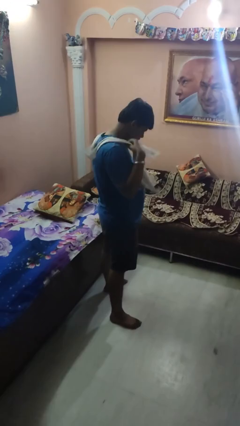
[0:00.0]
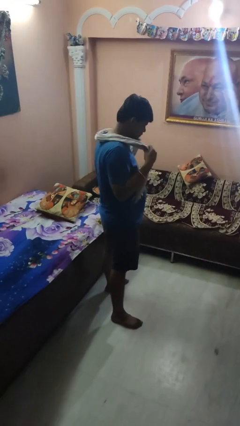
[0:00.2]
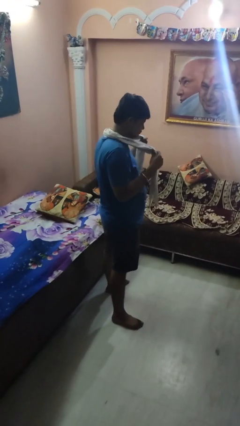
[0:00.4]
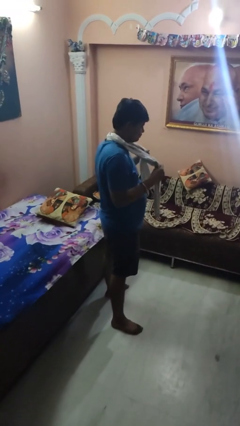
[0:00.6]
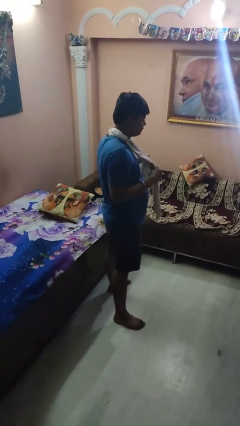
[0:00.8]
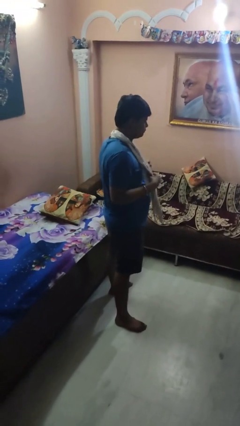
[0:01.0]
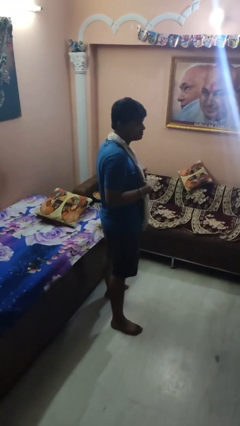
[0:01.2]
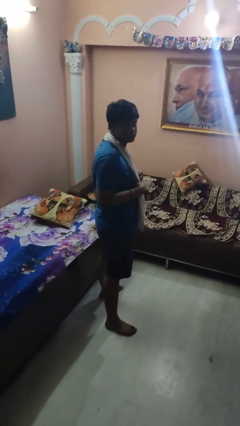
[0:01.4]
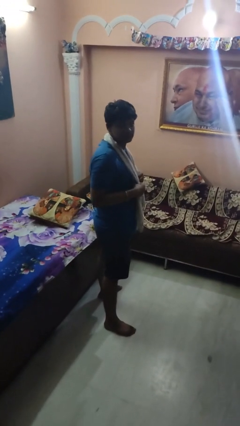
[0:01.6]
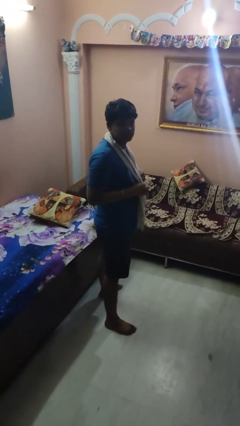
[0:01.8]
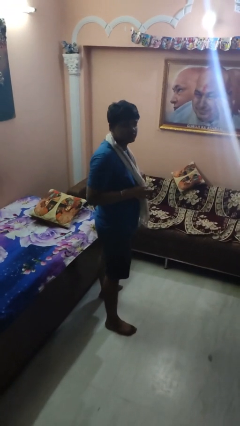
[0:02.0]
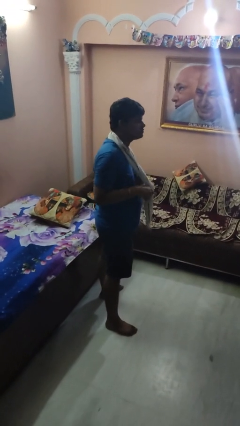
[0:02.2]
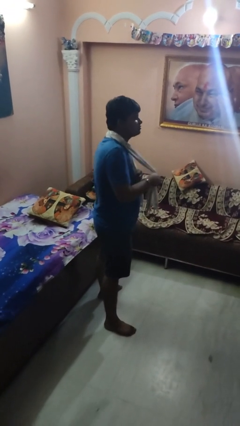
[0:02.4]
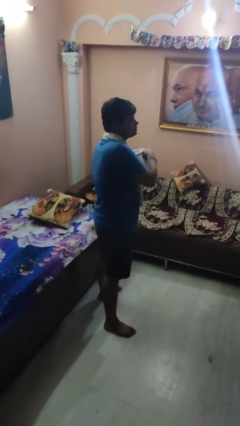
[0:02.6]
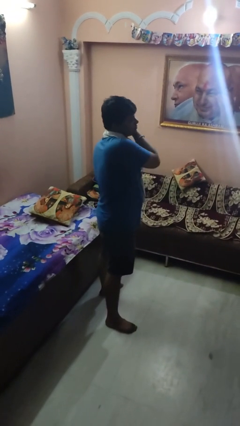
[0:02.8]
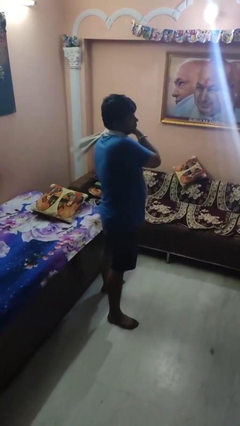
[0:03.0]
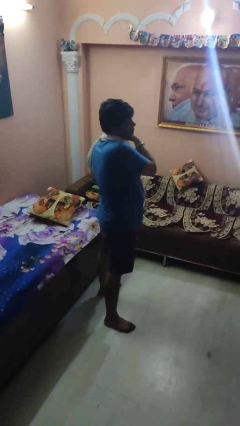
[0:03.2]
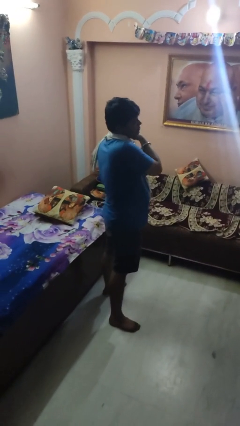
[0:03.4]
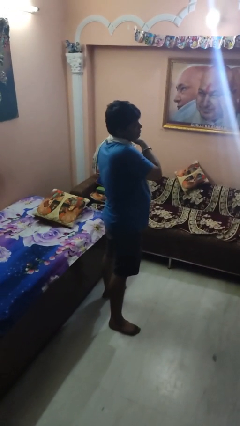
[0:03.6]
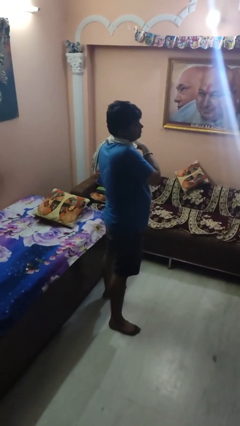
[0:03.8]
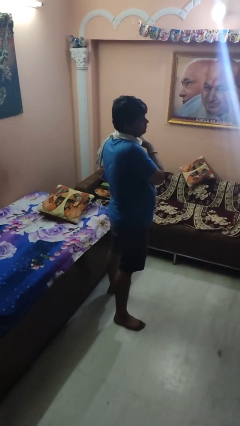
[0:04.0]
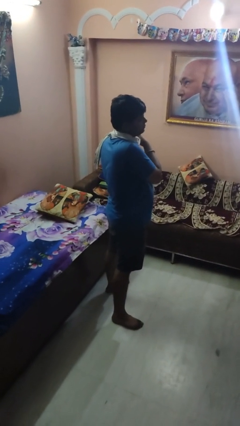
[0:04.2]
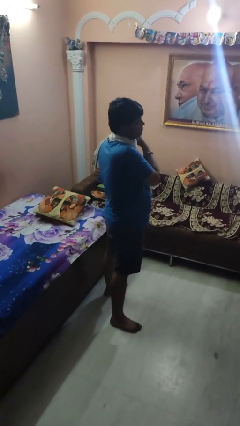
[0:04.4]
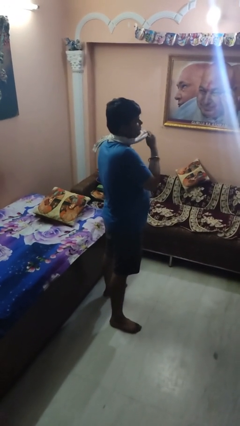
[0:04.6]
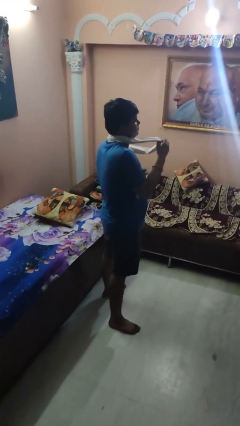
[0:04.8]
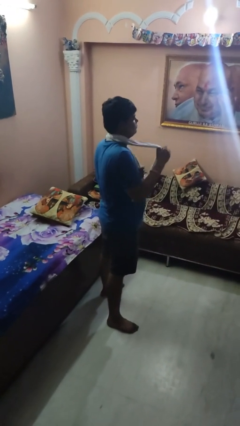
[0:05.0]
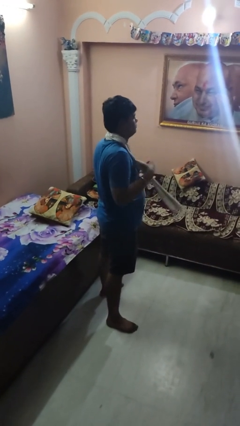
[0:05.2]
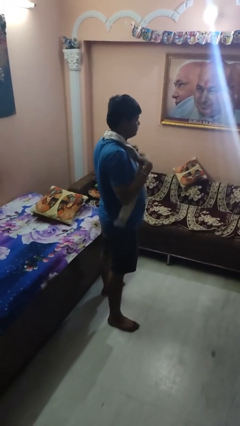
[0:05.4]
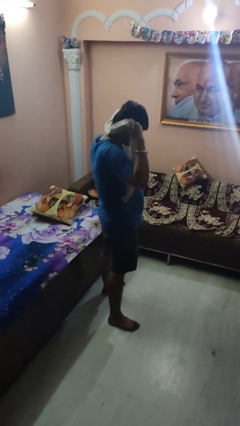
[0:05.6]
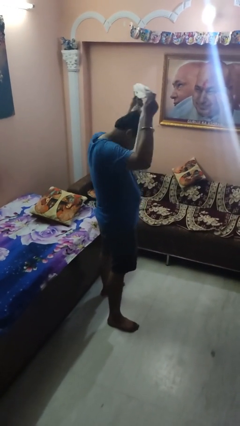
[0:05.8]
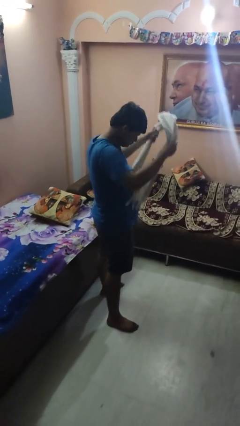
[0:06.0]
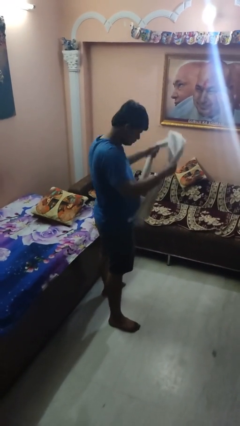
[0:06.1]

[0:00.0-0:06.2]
person puts on scarf

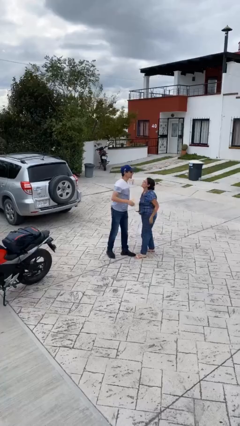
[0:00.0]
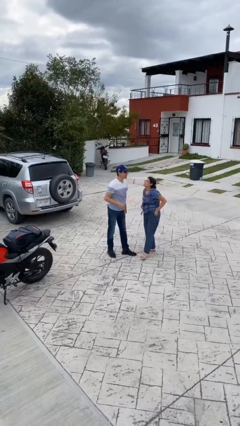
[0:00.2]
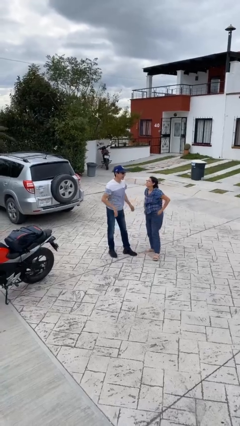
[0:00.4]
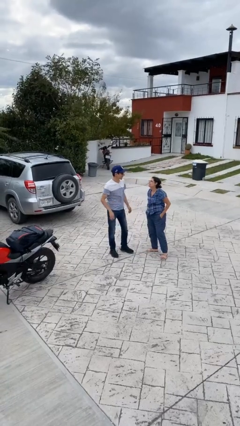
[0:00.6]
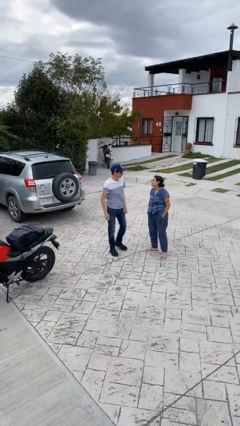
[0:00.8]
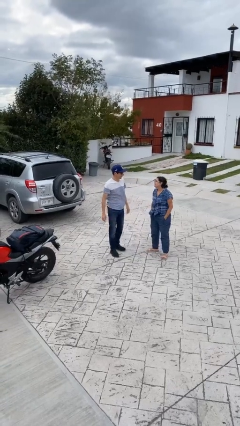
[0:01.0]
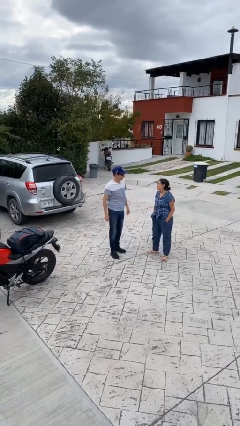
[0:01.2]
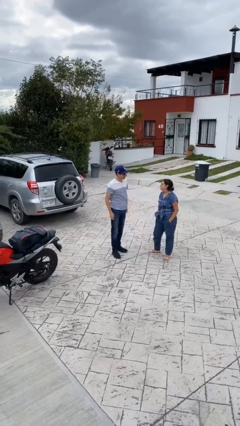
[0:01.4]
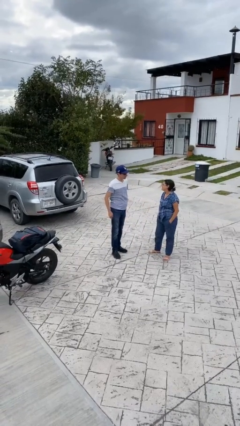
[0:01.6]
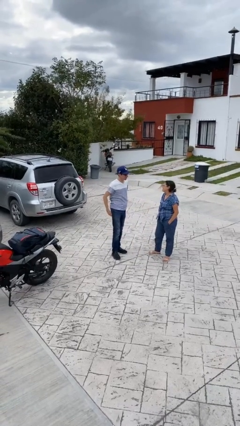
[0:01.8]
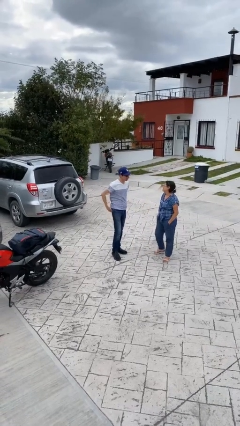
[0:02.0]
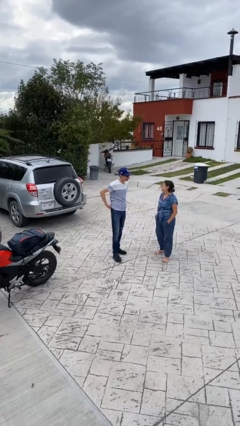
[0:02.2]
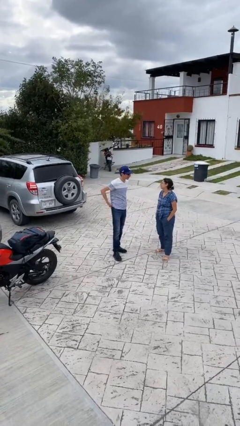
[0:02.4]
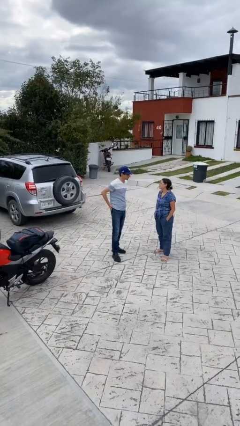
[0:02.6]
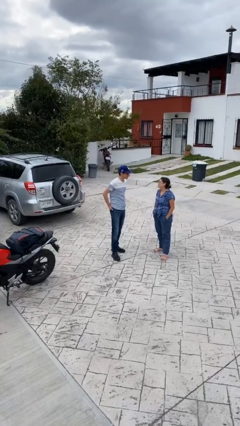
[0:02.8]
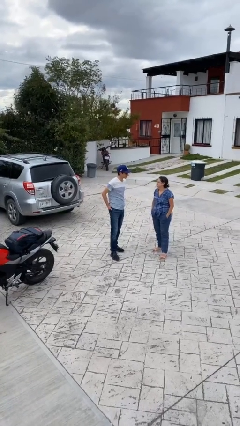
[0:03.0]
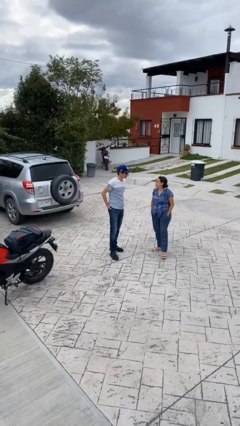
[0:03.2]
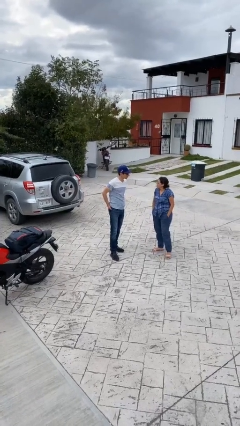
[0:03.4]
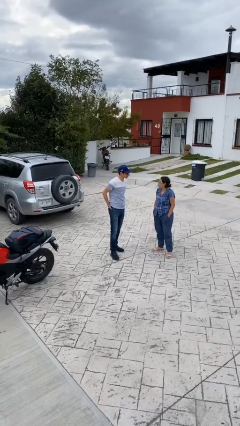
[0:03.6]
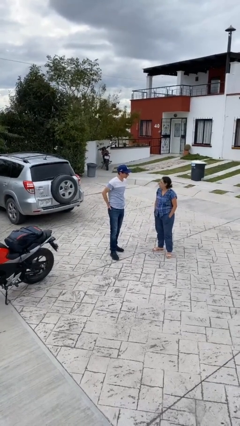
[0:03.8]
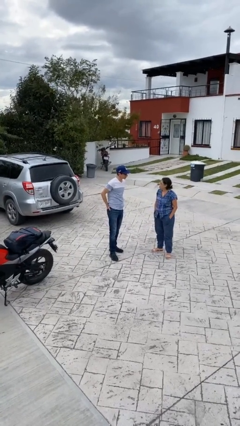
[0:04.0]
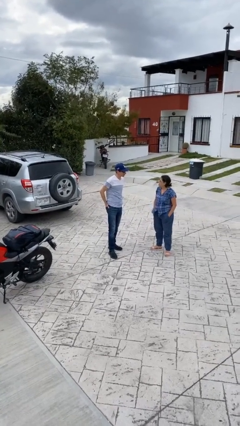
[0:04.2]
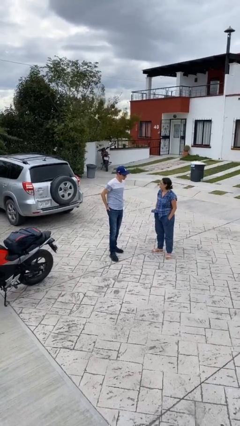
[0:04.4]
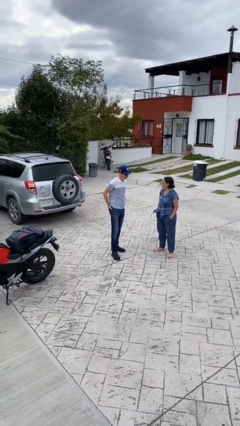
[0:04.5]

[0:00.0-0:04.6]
person talks to person

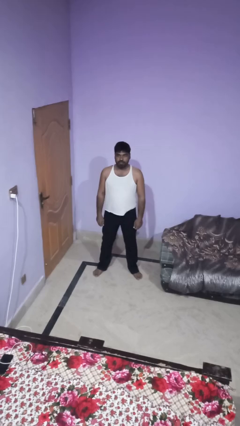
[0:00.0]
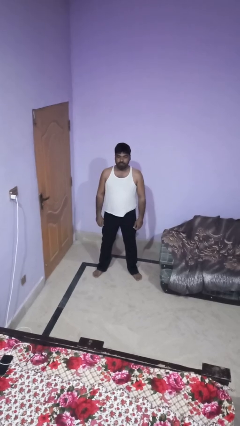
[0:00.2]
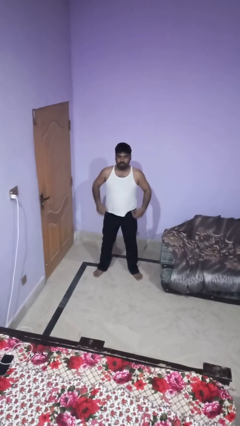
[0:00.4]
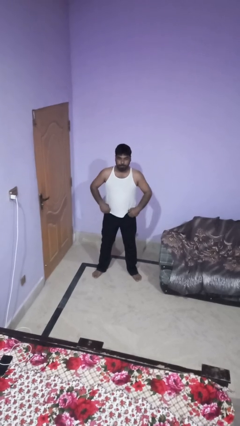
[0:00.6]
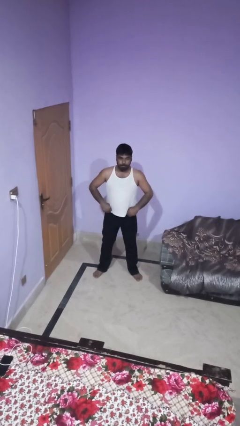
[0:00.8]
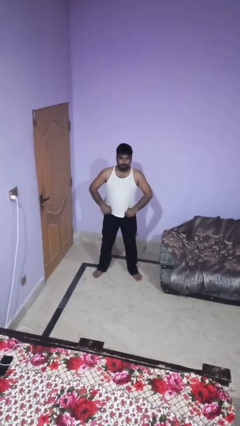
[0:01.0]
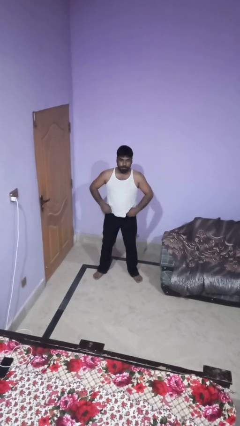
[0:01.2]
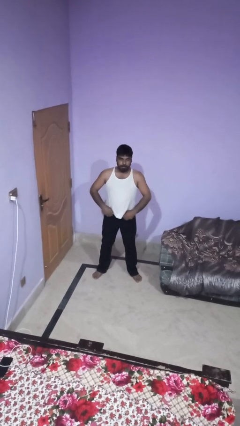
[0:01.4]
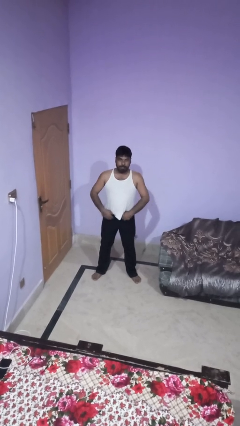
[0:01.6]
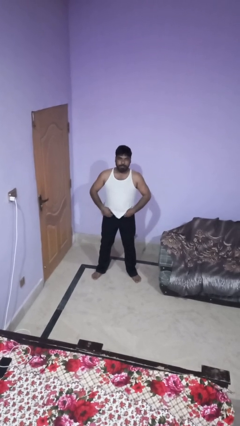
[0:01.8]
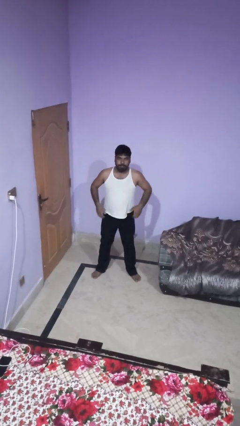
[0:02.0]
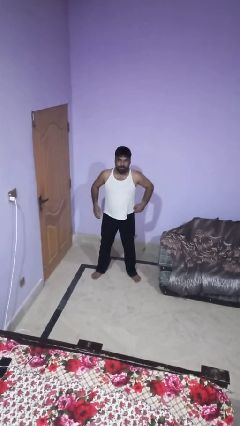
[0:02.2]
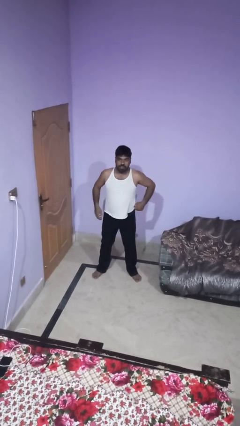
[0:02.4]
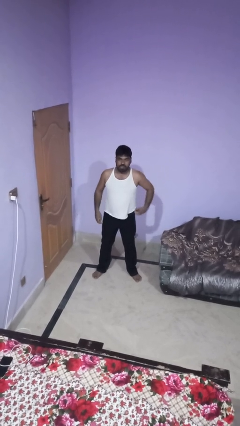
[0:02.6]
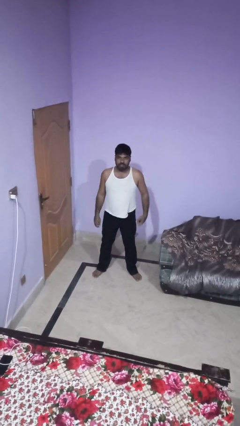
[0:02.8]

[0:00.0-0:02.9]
person hikes up pants

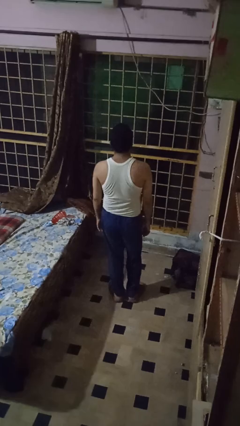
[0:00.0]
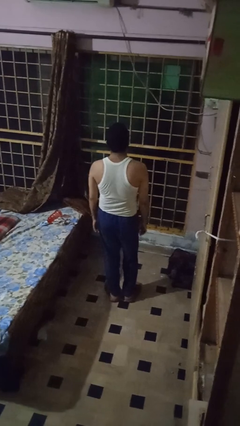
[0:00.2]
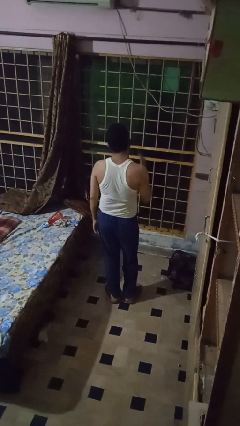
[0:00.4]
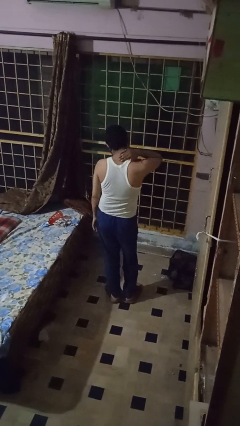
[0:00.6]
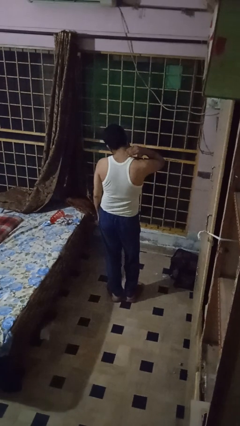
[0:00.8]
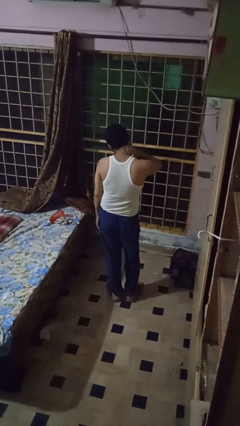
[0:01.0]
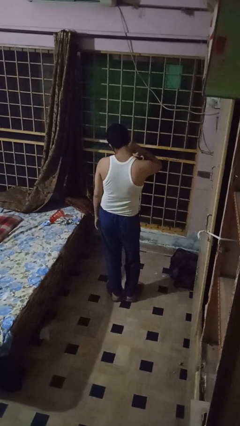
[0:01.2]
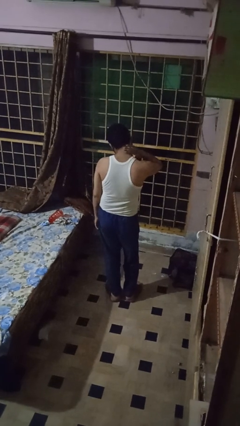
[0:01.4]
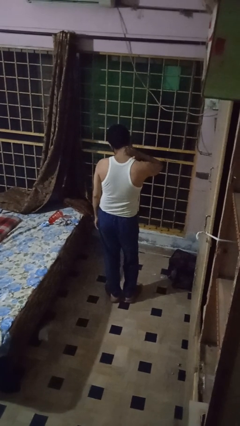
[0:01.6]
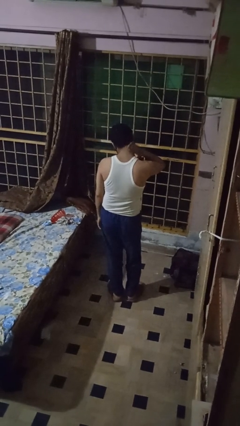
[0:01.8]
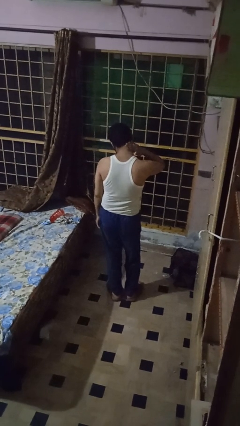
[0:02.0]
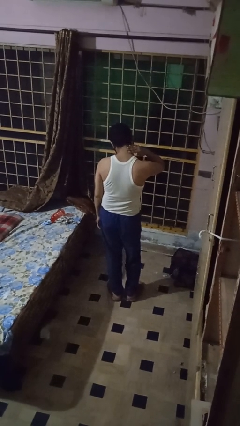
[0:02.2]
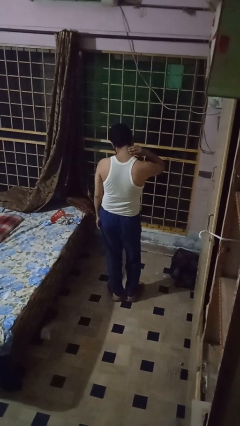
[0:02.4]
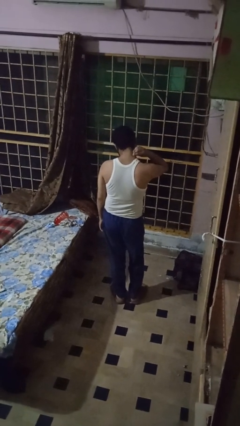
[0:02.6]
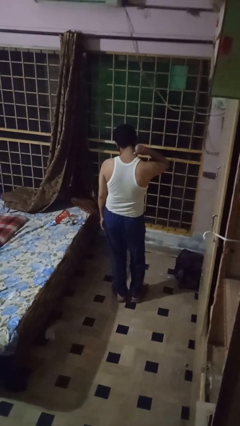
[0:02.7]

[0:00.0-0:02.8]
person swats bug

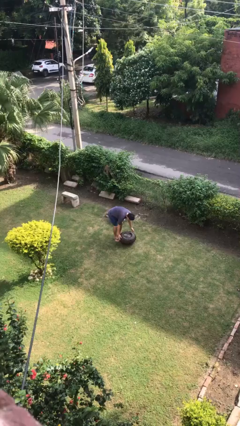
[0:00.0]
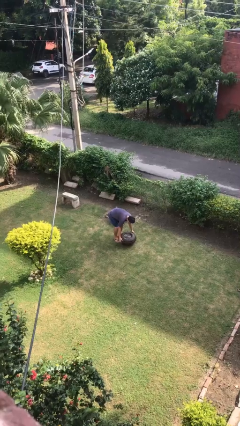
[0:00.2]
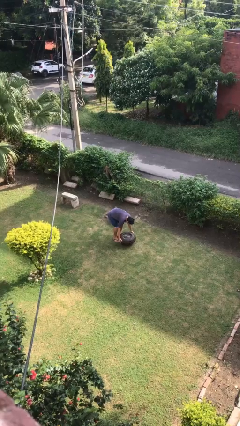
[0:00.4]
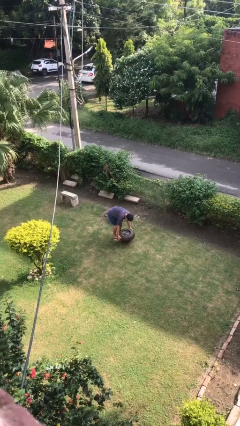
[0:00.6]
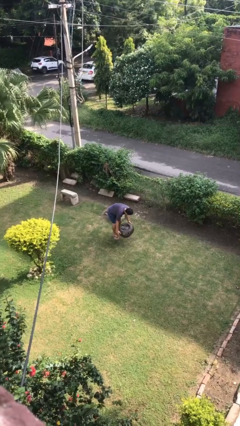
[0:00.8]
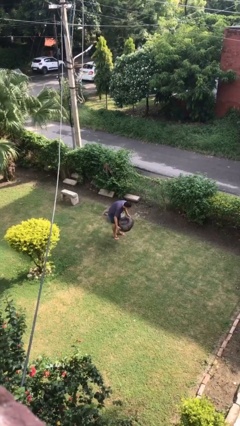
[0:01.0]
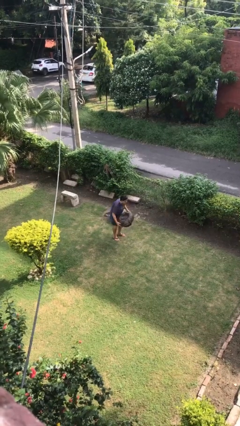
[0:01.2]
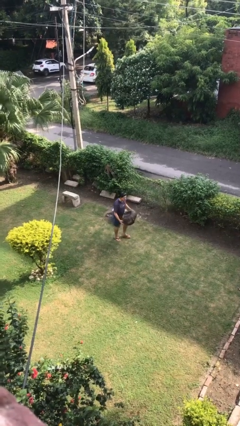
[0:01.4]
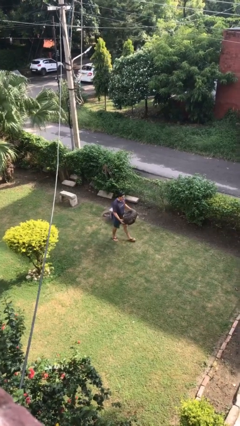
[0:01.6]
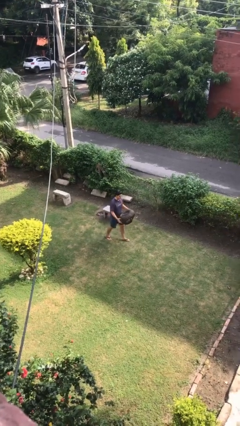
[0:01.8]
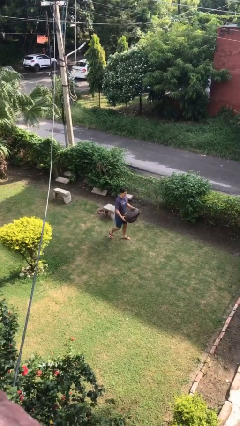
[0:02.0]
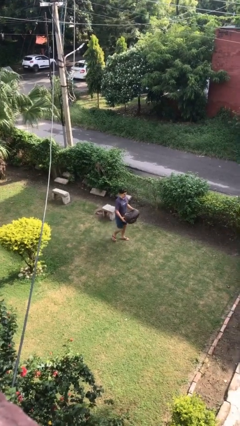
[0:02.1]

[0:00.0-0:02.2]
person picks up object from floor
